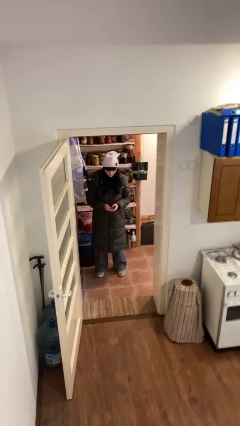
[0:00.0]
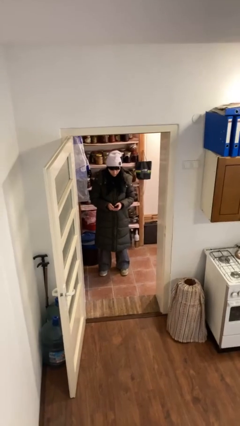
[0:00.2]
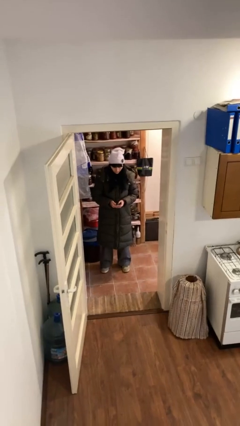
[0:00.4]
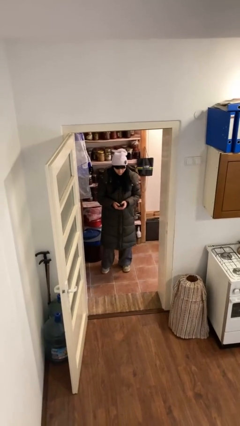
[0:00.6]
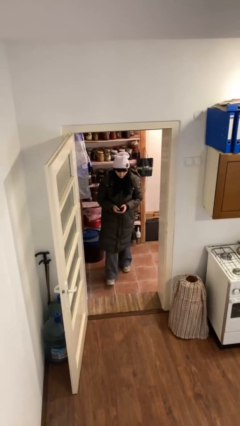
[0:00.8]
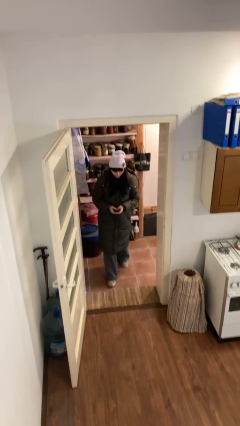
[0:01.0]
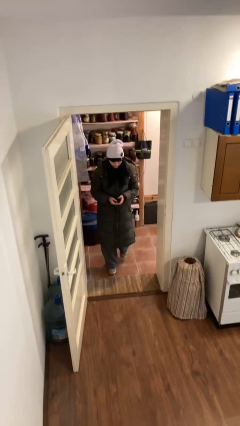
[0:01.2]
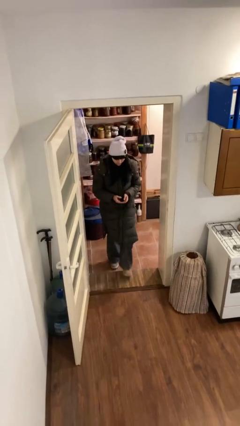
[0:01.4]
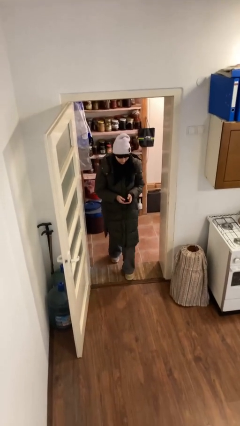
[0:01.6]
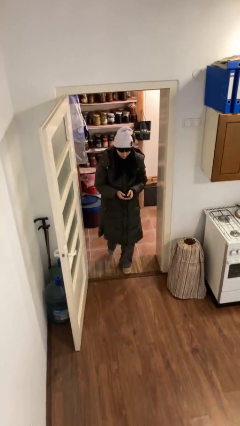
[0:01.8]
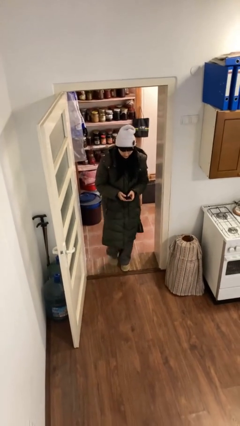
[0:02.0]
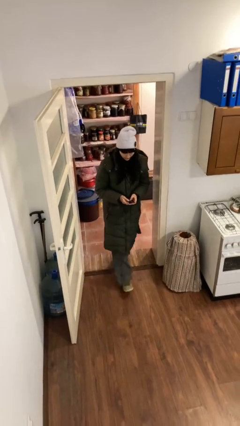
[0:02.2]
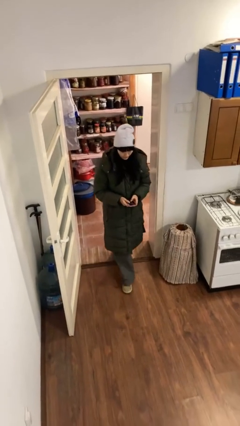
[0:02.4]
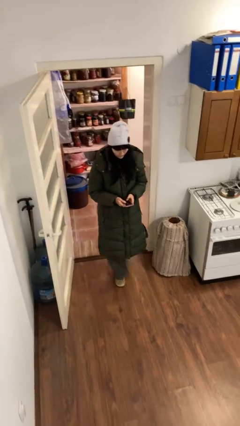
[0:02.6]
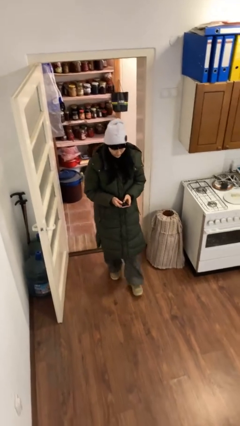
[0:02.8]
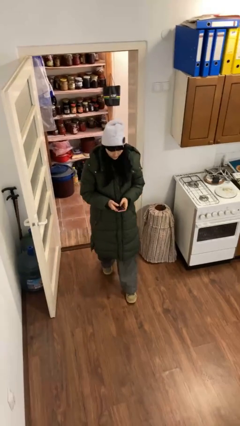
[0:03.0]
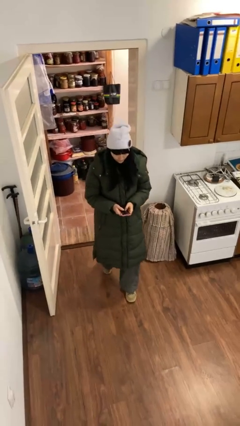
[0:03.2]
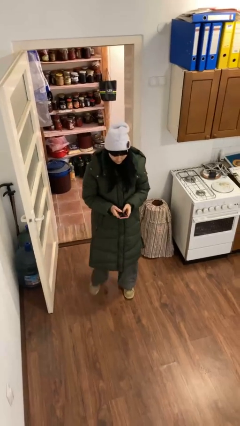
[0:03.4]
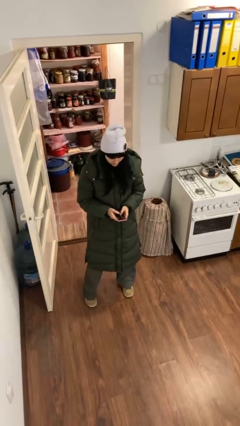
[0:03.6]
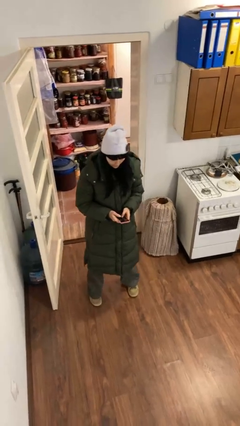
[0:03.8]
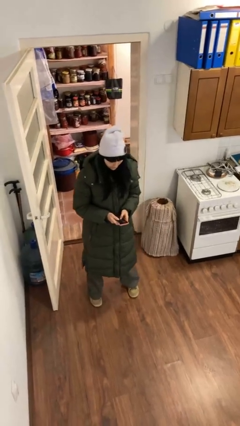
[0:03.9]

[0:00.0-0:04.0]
person enters scene through structure

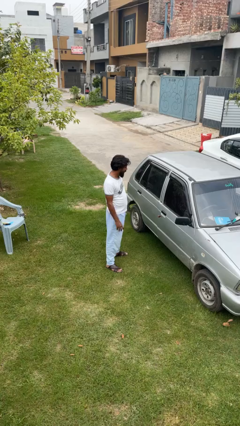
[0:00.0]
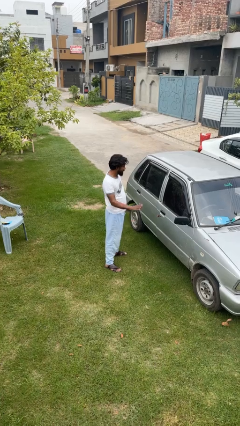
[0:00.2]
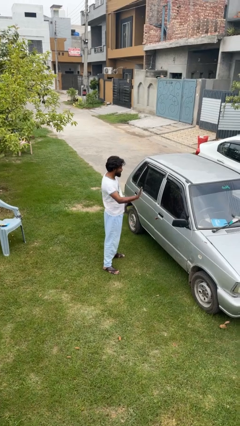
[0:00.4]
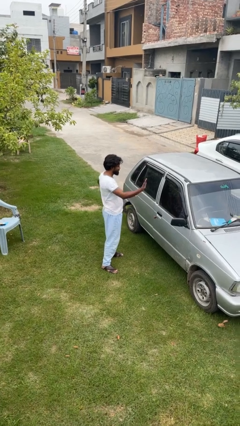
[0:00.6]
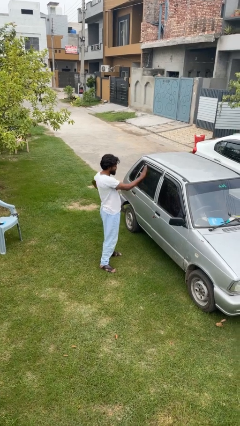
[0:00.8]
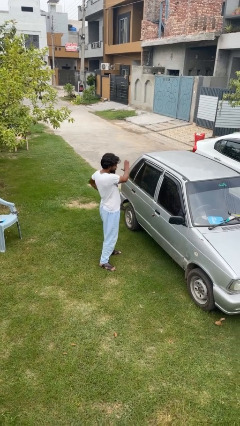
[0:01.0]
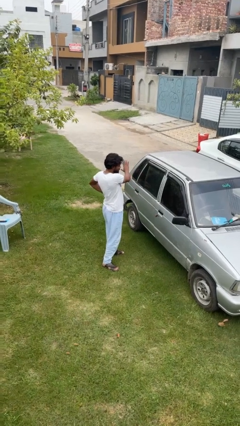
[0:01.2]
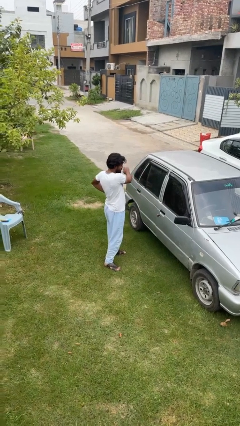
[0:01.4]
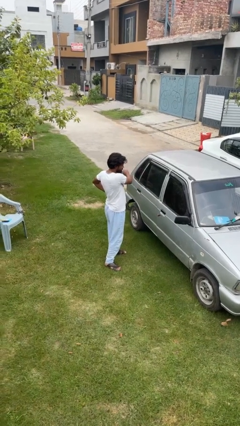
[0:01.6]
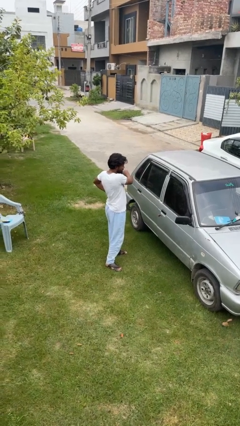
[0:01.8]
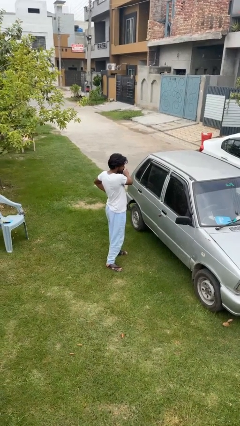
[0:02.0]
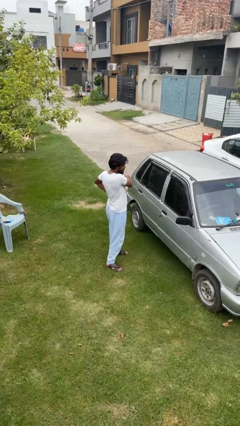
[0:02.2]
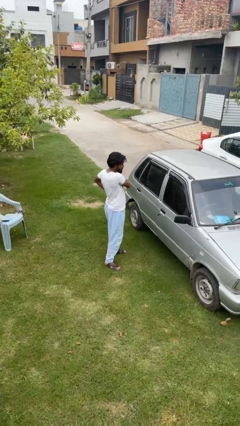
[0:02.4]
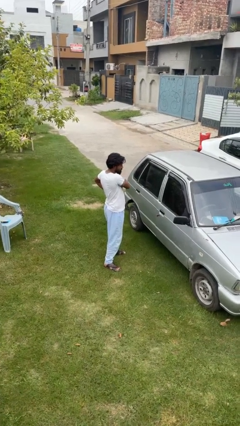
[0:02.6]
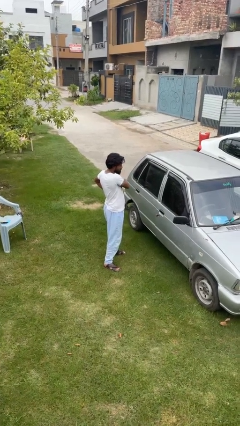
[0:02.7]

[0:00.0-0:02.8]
person gestures swipe left

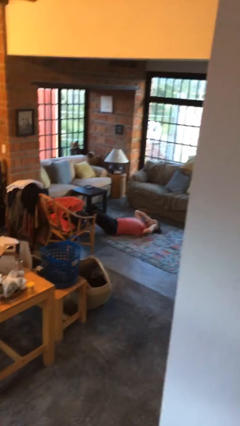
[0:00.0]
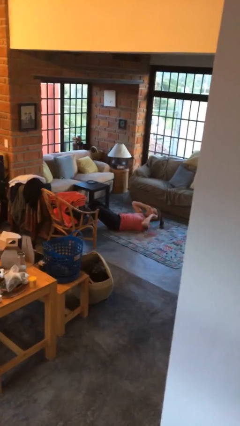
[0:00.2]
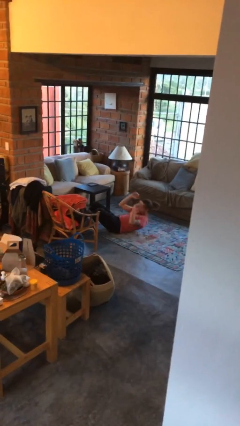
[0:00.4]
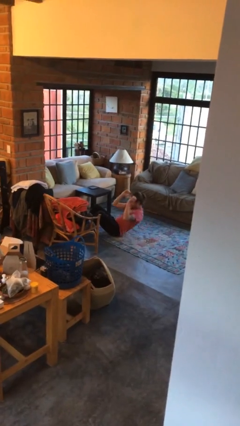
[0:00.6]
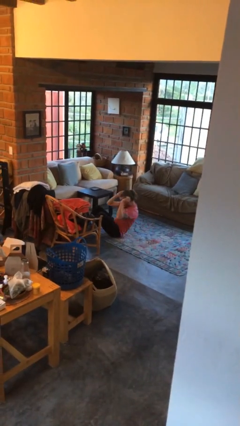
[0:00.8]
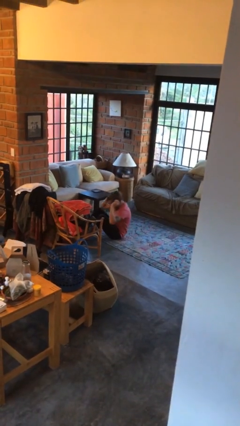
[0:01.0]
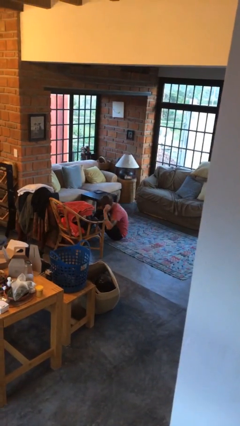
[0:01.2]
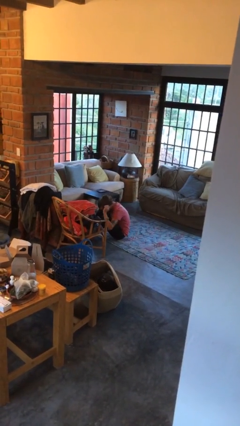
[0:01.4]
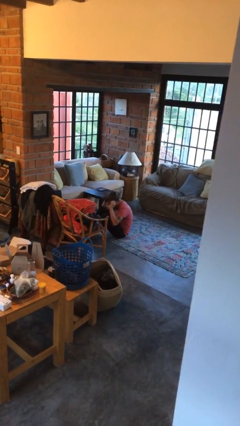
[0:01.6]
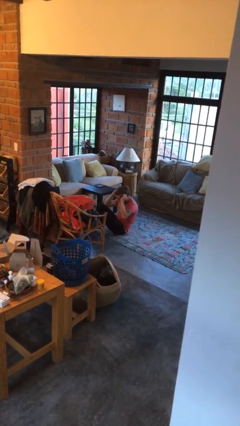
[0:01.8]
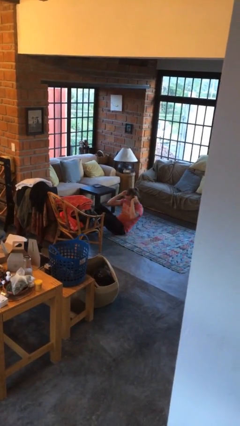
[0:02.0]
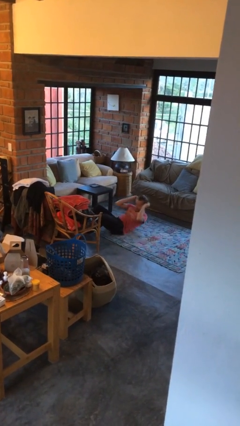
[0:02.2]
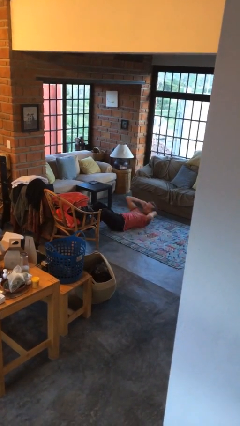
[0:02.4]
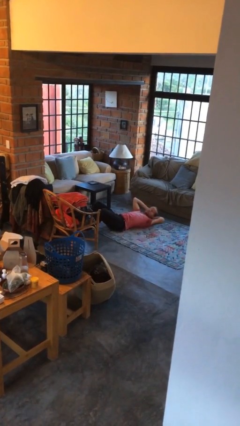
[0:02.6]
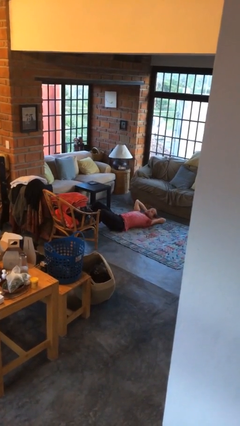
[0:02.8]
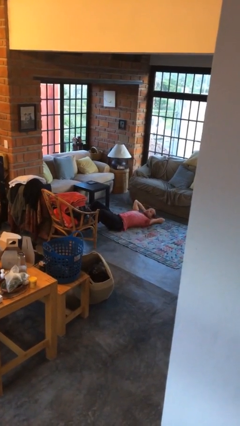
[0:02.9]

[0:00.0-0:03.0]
person exercises with situp

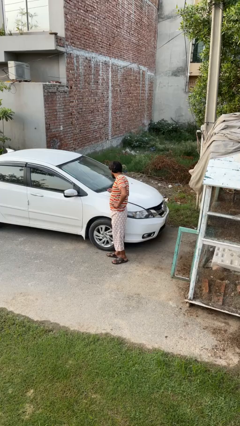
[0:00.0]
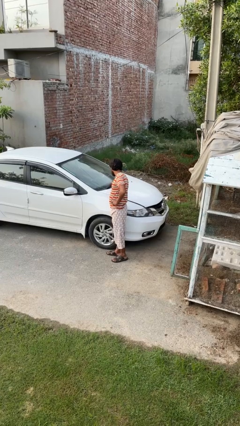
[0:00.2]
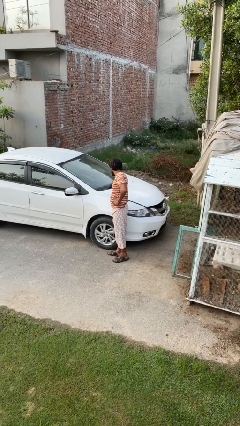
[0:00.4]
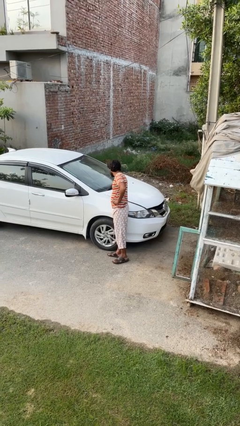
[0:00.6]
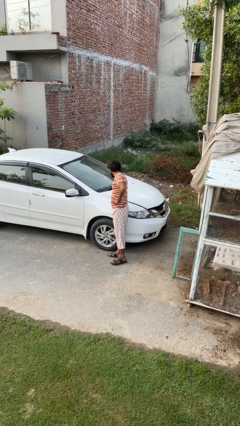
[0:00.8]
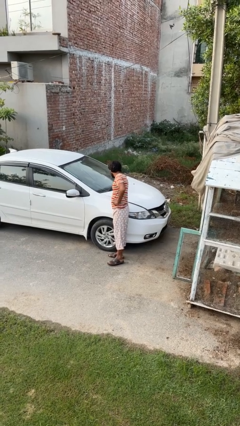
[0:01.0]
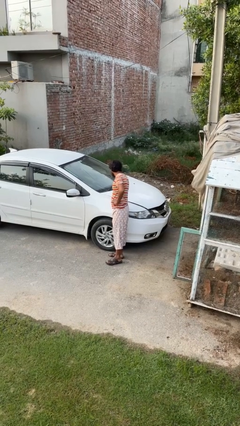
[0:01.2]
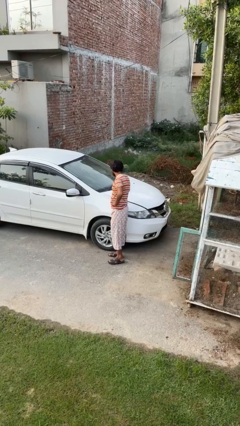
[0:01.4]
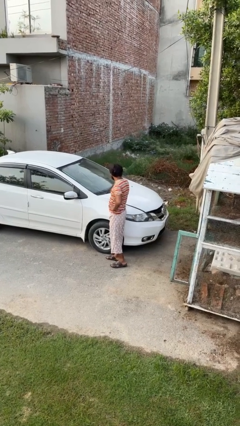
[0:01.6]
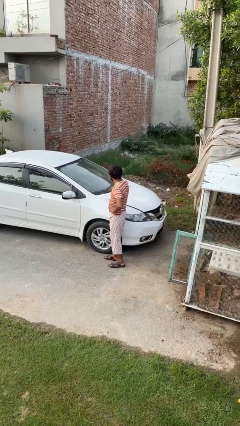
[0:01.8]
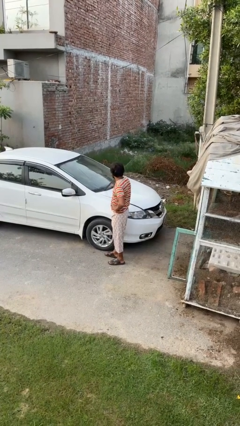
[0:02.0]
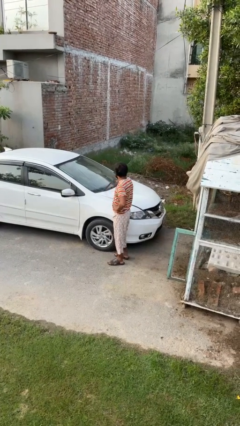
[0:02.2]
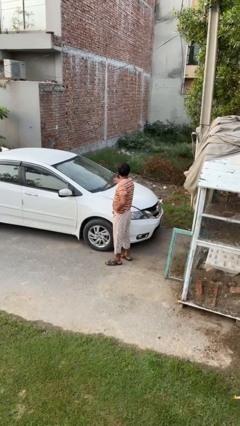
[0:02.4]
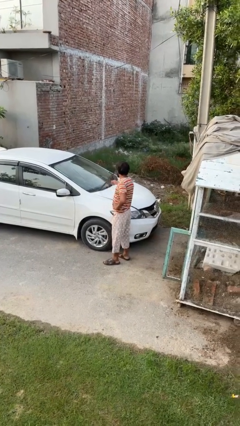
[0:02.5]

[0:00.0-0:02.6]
person flips up car wipers

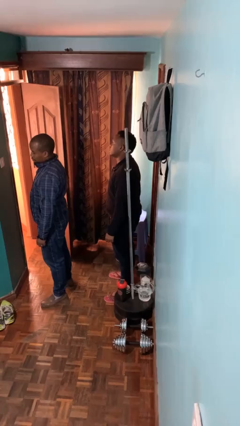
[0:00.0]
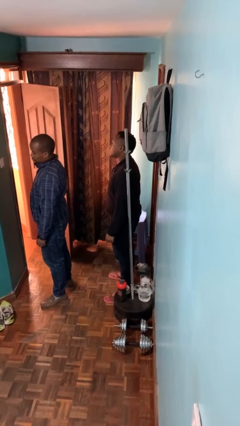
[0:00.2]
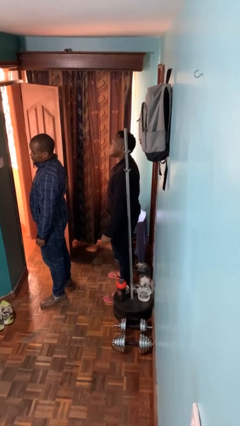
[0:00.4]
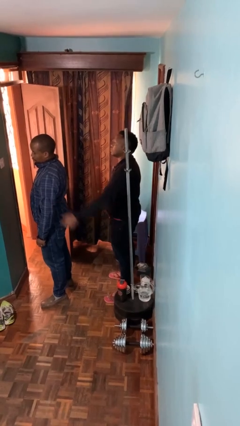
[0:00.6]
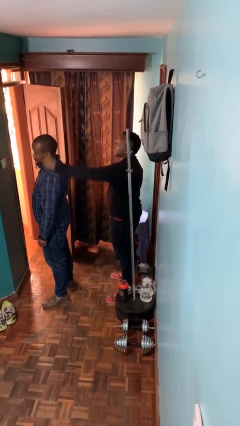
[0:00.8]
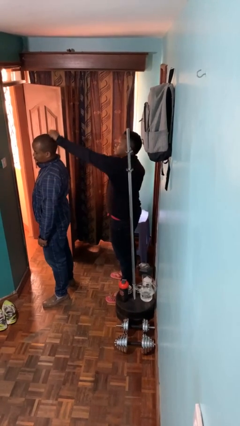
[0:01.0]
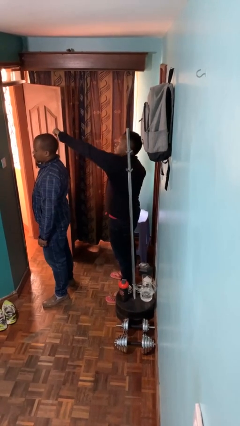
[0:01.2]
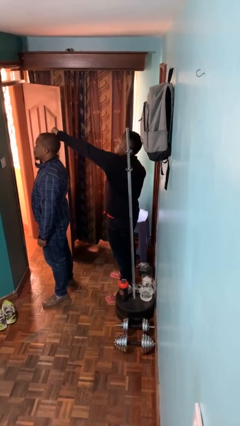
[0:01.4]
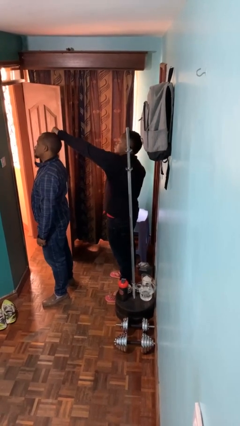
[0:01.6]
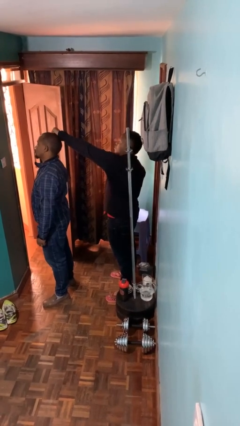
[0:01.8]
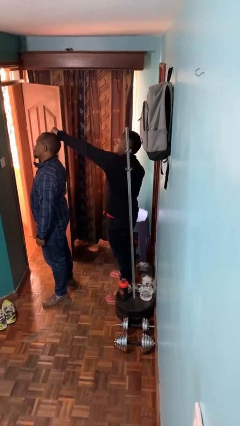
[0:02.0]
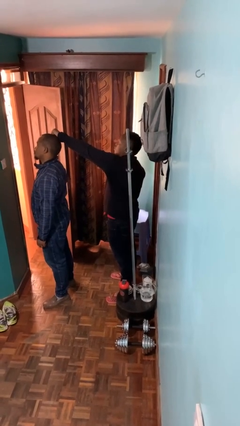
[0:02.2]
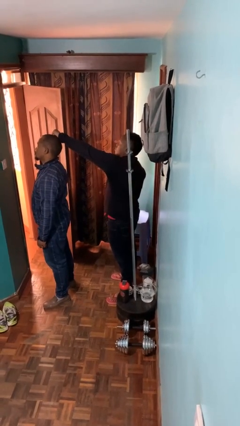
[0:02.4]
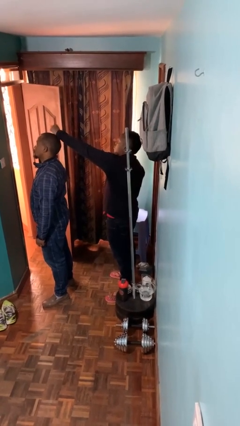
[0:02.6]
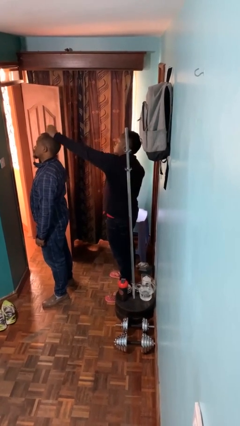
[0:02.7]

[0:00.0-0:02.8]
person grabs person by hair

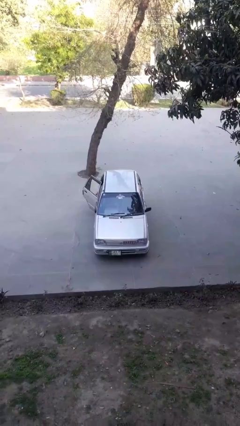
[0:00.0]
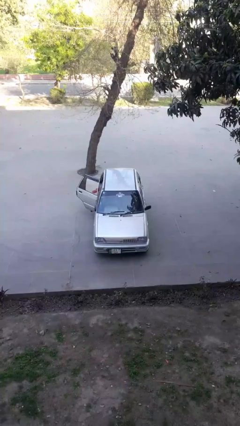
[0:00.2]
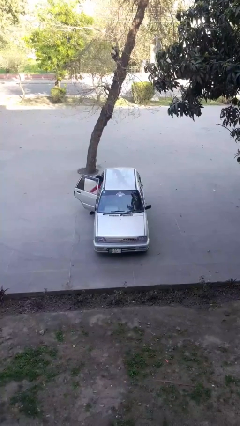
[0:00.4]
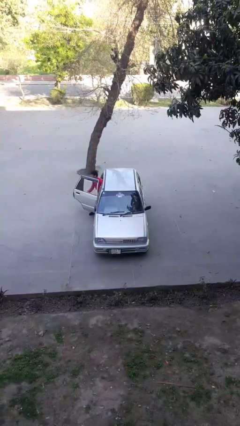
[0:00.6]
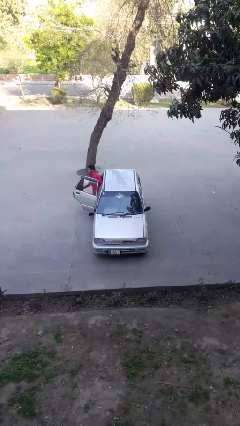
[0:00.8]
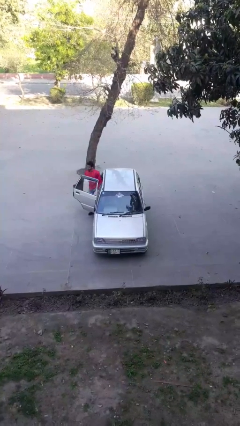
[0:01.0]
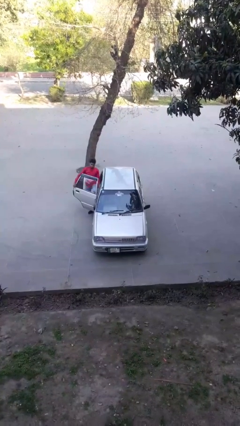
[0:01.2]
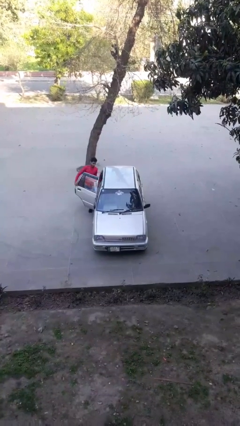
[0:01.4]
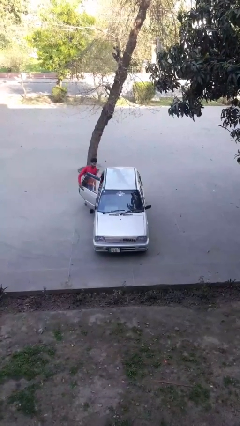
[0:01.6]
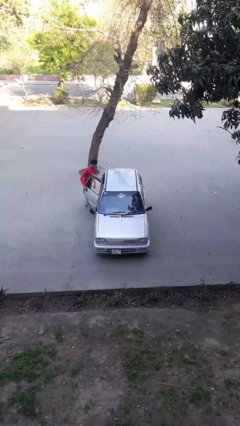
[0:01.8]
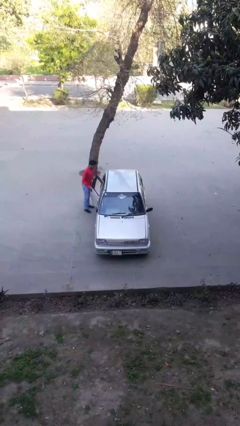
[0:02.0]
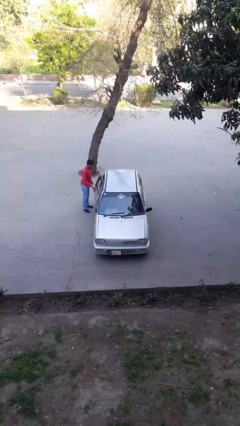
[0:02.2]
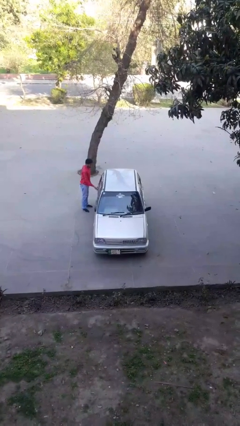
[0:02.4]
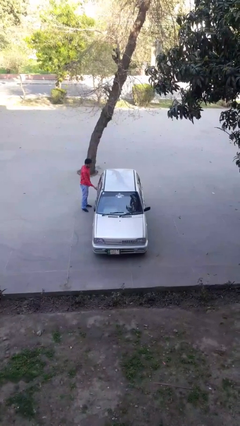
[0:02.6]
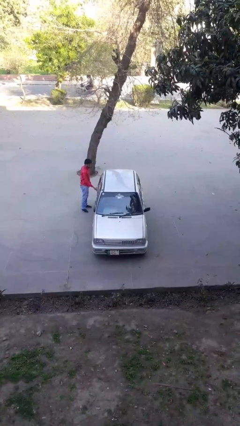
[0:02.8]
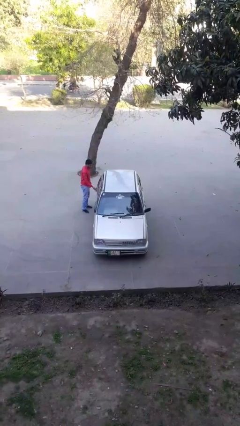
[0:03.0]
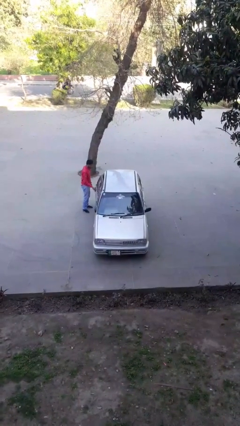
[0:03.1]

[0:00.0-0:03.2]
car drops off person
